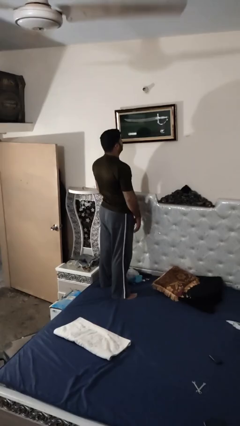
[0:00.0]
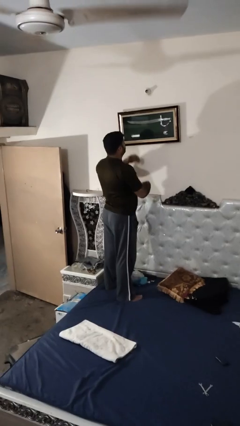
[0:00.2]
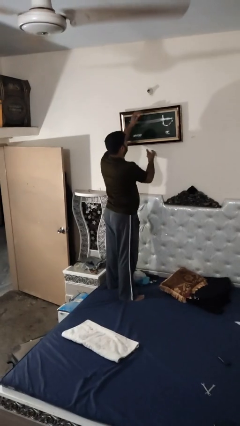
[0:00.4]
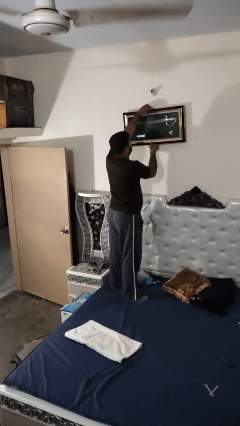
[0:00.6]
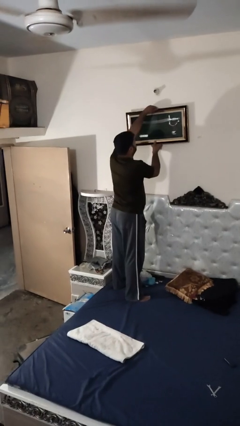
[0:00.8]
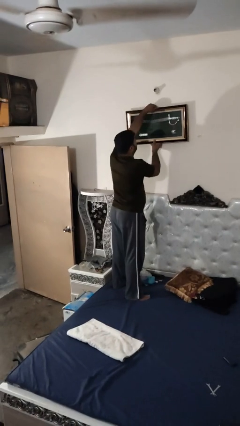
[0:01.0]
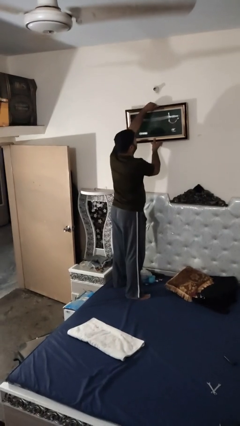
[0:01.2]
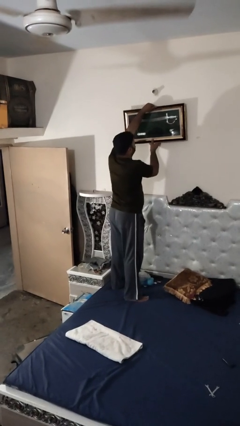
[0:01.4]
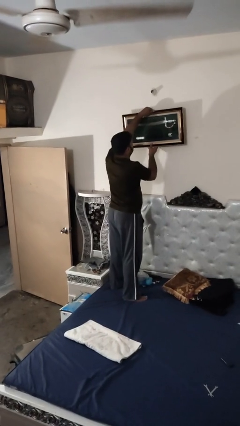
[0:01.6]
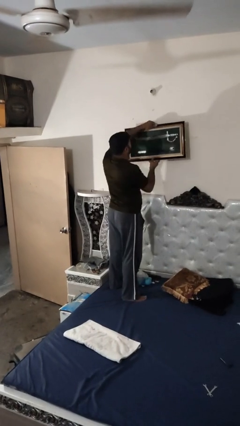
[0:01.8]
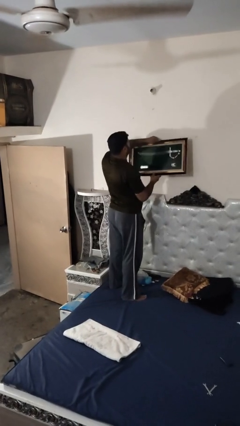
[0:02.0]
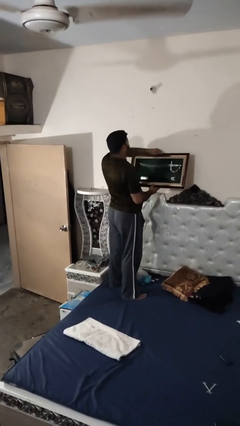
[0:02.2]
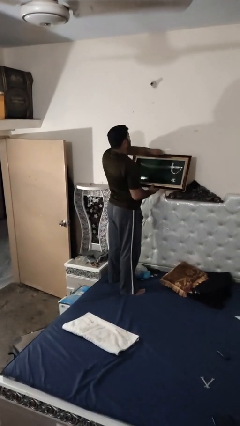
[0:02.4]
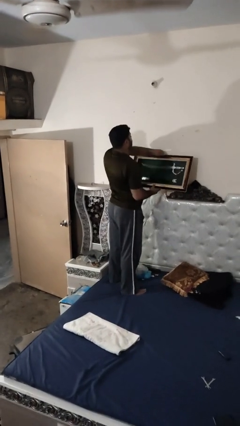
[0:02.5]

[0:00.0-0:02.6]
person takes down picture frame

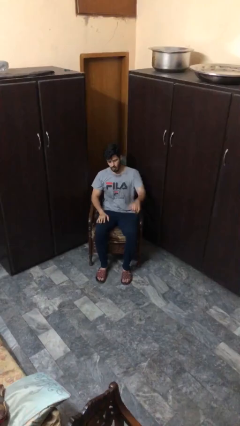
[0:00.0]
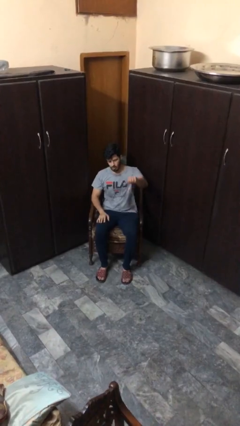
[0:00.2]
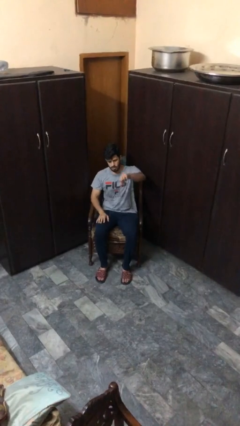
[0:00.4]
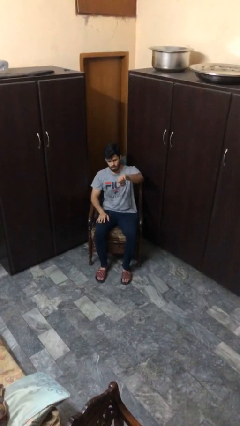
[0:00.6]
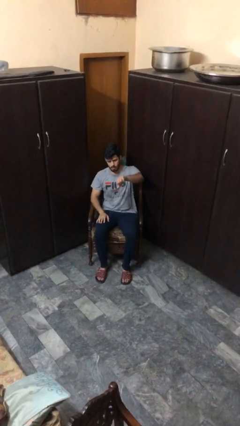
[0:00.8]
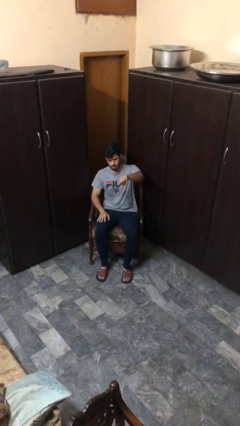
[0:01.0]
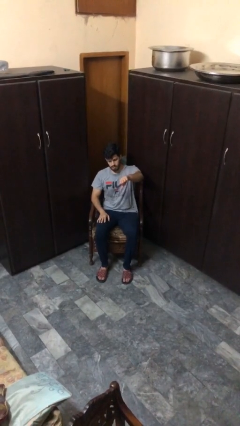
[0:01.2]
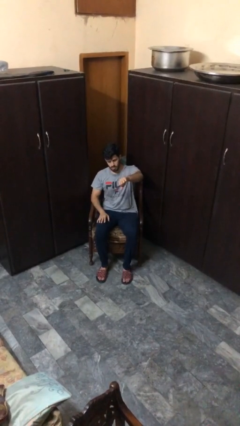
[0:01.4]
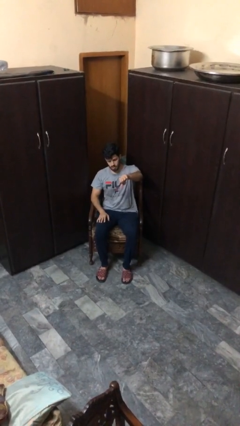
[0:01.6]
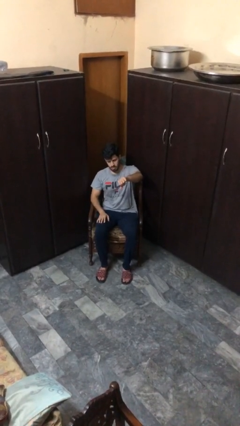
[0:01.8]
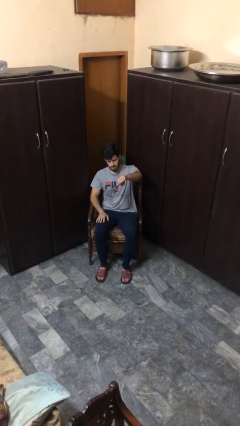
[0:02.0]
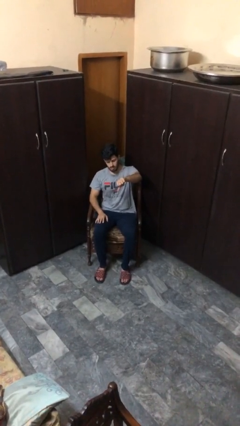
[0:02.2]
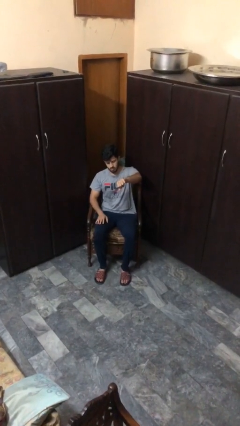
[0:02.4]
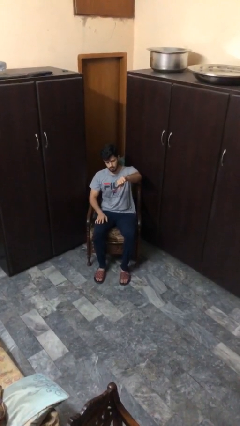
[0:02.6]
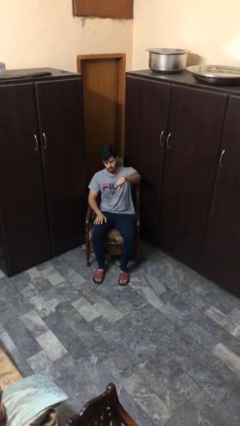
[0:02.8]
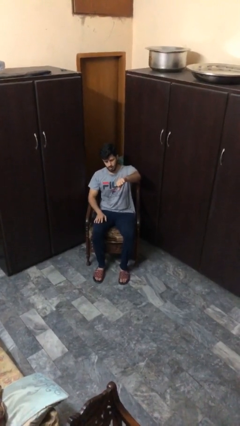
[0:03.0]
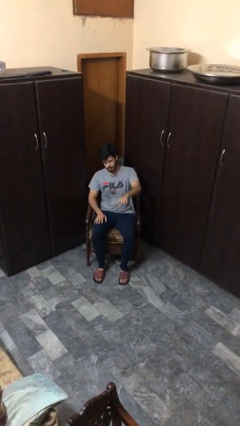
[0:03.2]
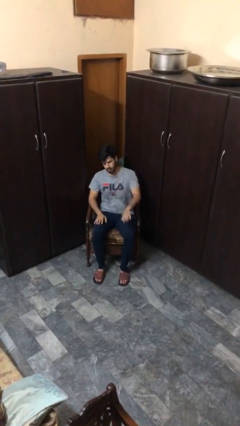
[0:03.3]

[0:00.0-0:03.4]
person gestures thumbs down

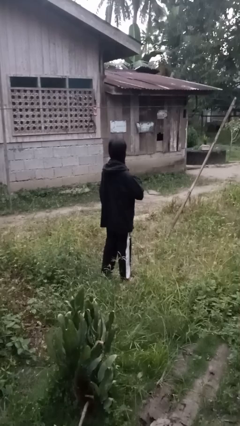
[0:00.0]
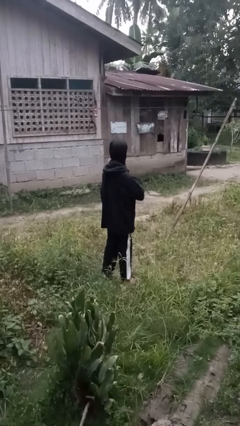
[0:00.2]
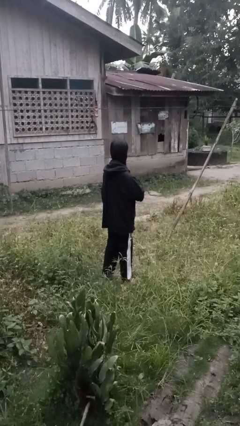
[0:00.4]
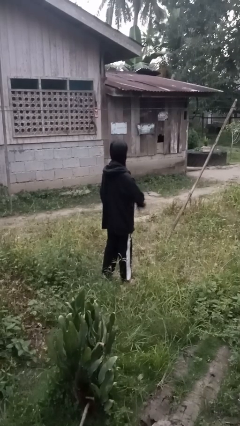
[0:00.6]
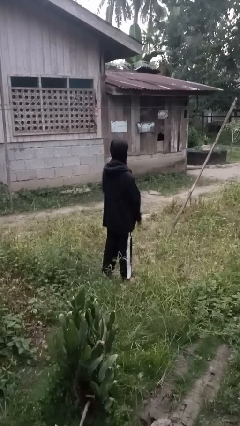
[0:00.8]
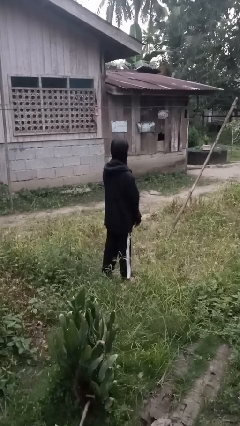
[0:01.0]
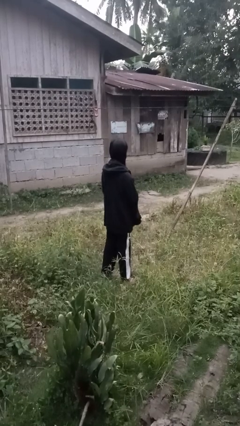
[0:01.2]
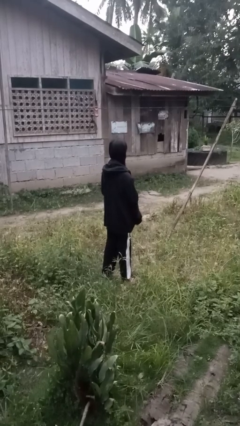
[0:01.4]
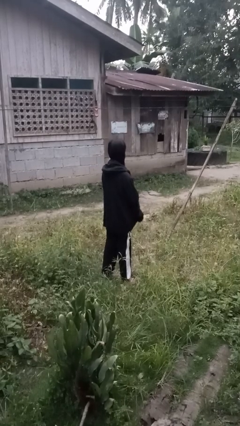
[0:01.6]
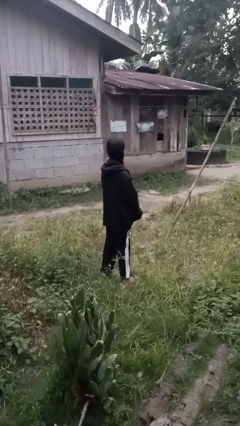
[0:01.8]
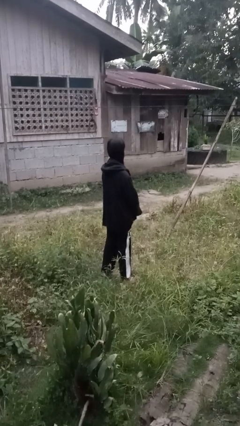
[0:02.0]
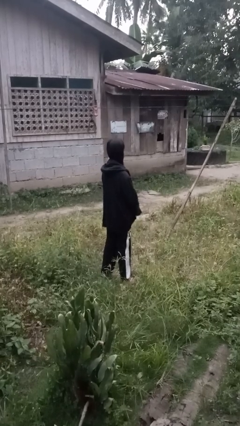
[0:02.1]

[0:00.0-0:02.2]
person unzips jacket

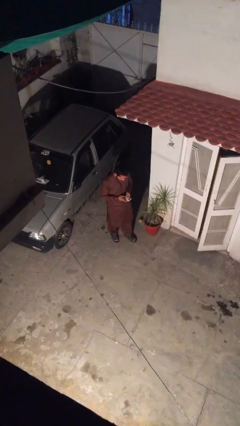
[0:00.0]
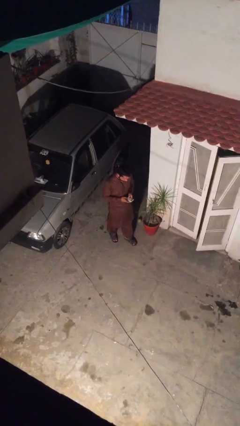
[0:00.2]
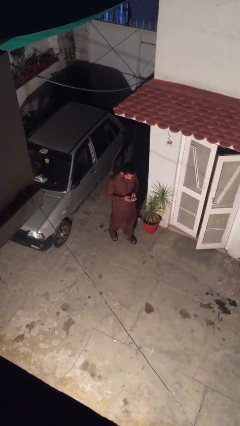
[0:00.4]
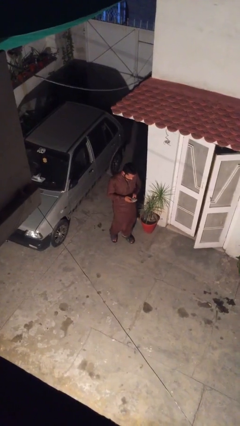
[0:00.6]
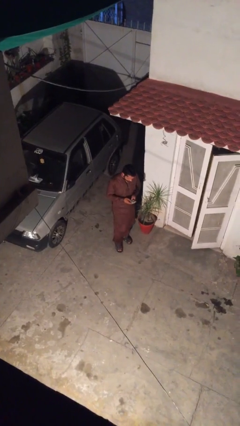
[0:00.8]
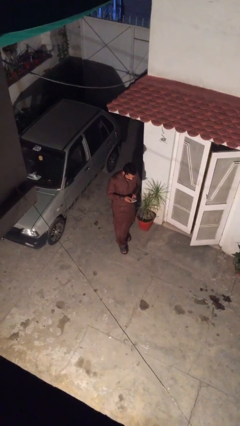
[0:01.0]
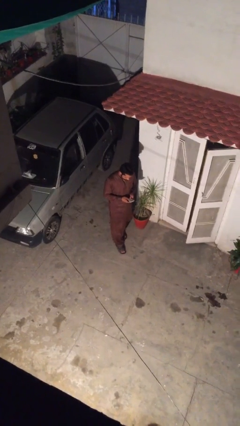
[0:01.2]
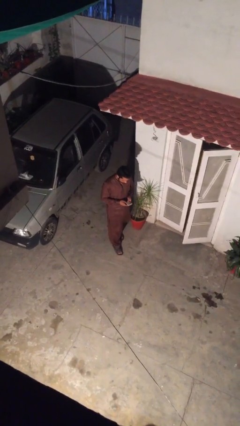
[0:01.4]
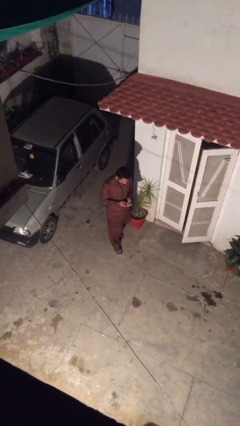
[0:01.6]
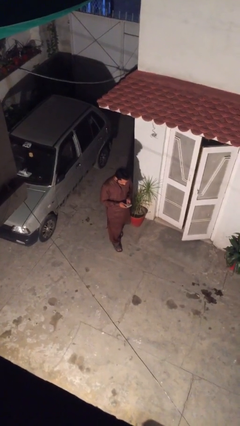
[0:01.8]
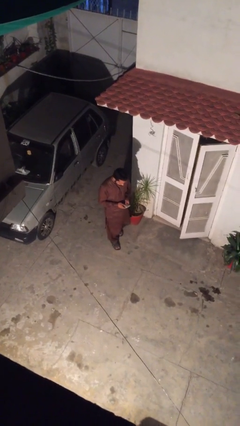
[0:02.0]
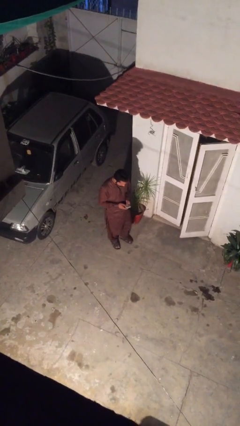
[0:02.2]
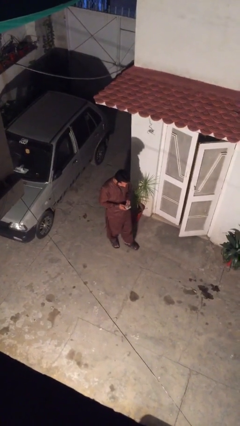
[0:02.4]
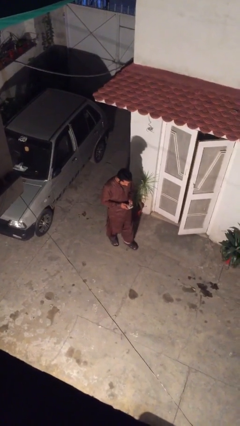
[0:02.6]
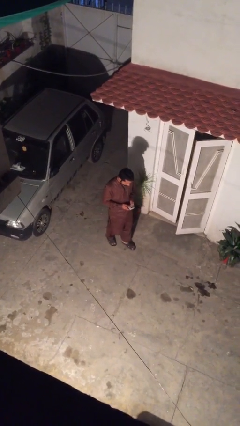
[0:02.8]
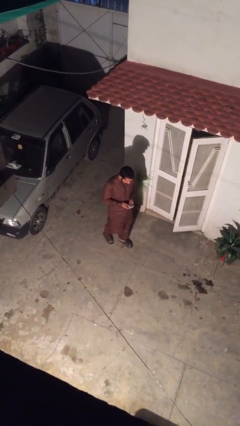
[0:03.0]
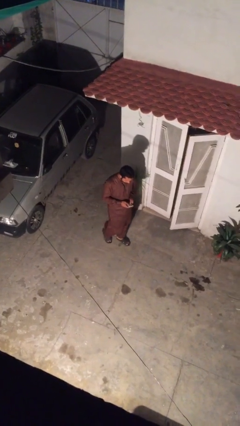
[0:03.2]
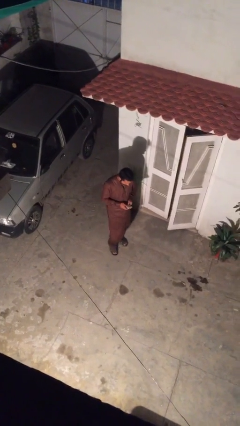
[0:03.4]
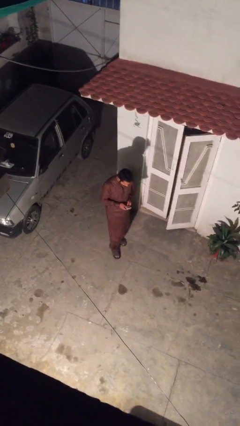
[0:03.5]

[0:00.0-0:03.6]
person texts on phone

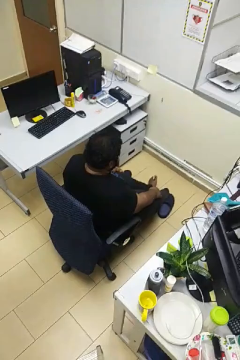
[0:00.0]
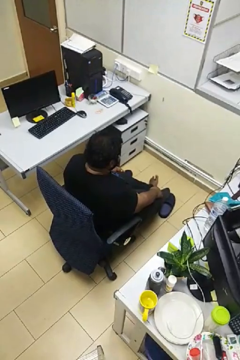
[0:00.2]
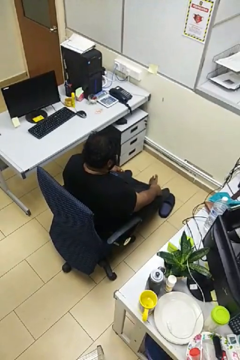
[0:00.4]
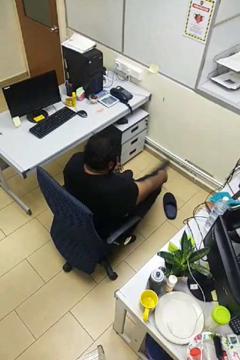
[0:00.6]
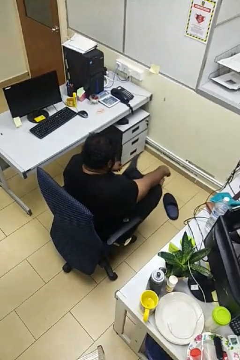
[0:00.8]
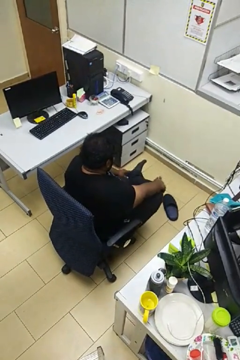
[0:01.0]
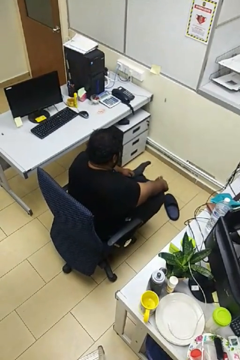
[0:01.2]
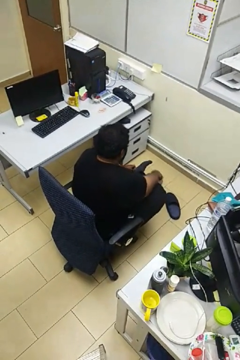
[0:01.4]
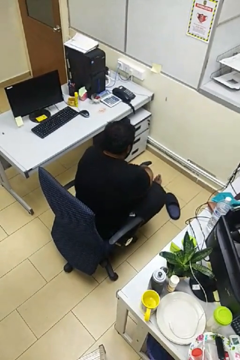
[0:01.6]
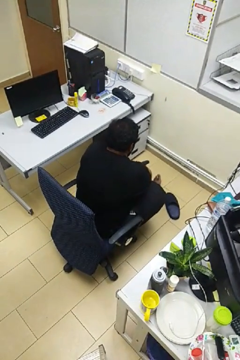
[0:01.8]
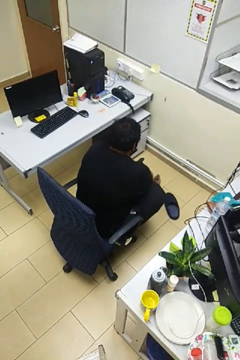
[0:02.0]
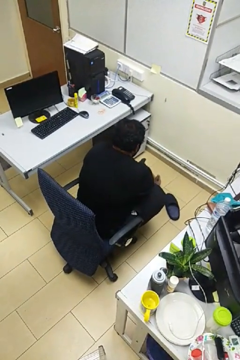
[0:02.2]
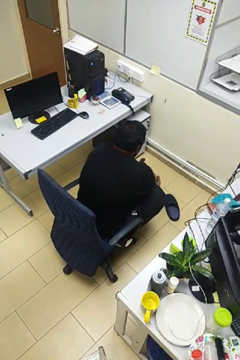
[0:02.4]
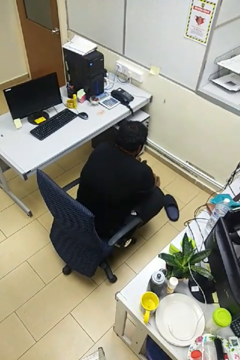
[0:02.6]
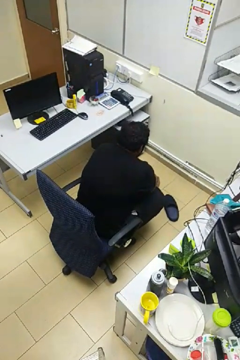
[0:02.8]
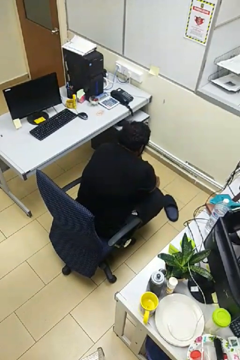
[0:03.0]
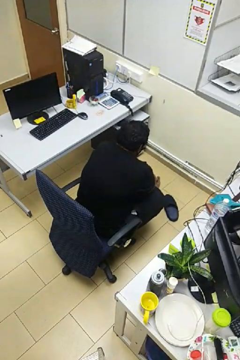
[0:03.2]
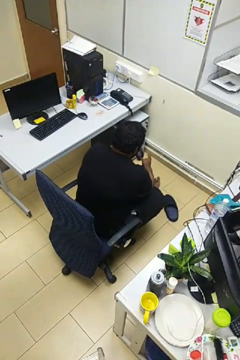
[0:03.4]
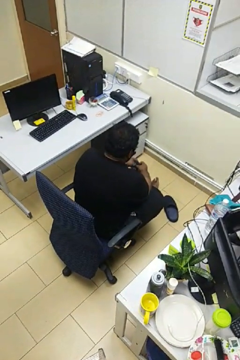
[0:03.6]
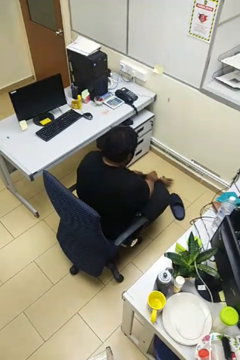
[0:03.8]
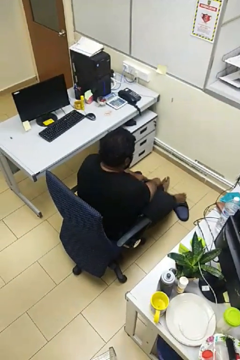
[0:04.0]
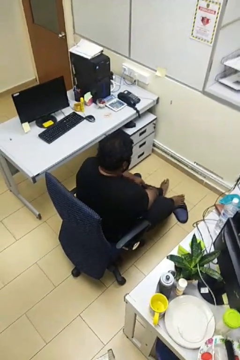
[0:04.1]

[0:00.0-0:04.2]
person takes off socks

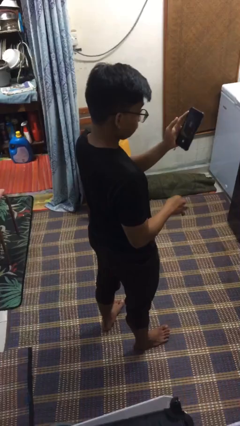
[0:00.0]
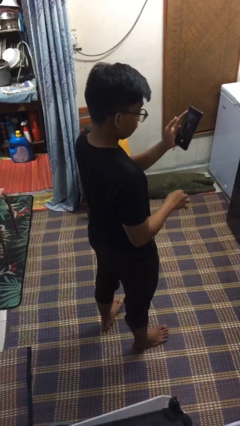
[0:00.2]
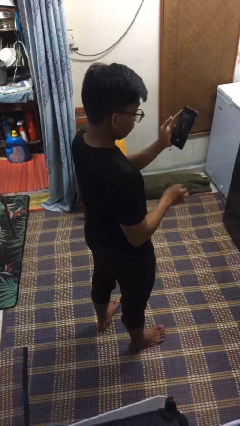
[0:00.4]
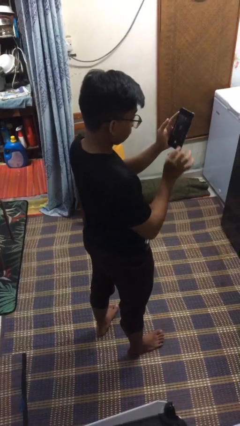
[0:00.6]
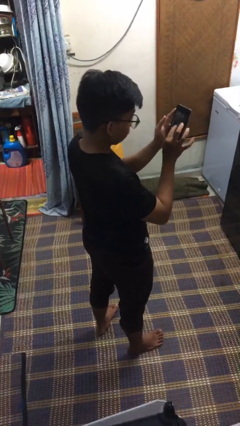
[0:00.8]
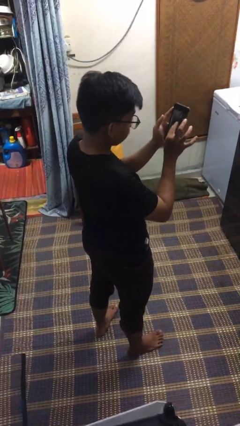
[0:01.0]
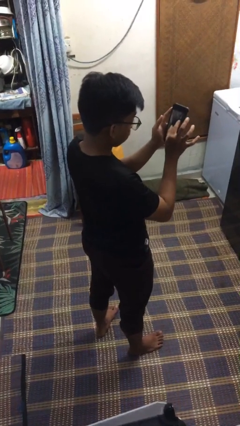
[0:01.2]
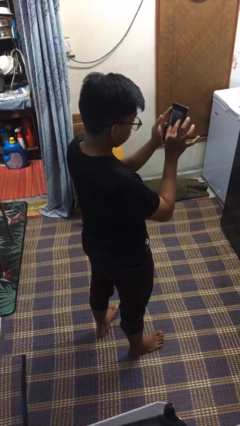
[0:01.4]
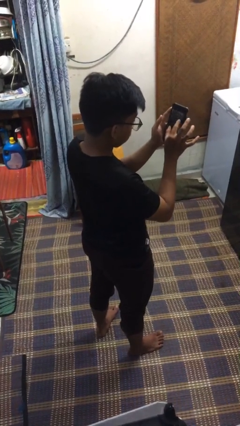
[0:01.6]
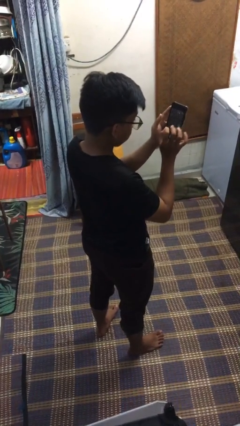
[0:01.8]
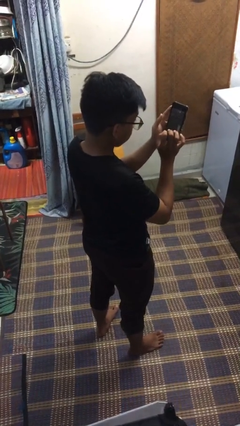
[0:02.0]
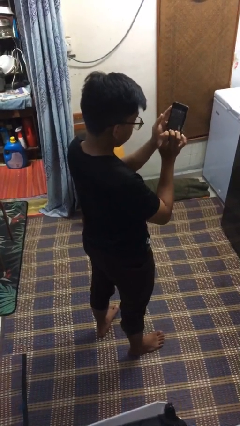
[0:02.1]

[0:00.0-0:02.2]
person gestures zoom in
